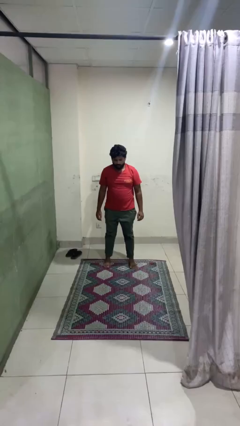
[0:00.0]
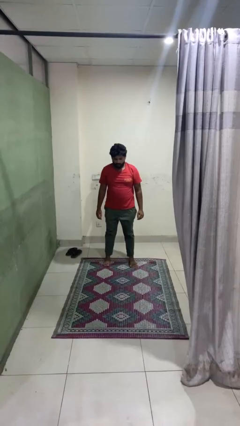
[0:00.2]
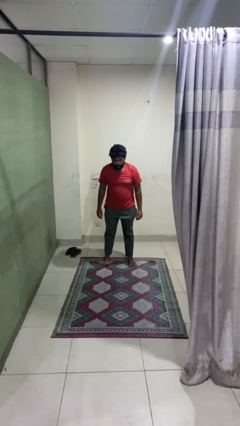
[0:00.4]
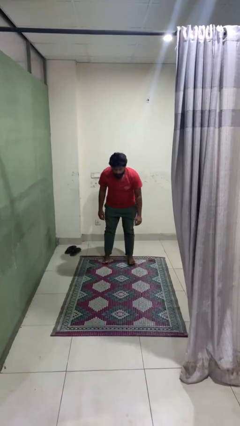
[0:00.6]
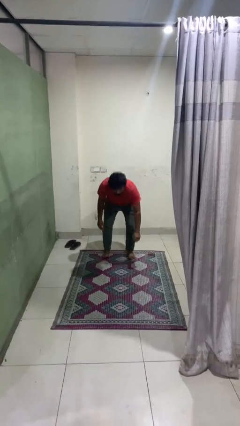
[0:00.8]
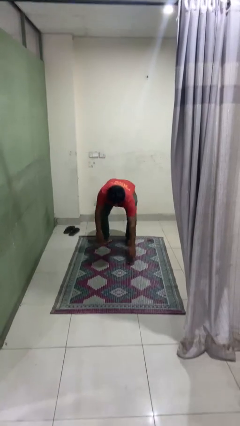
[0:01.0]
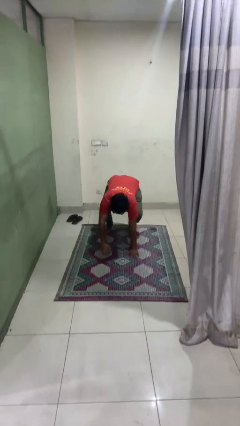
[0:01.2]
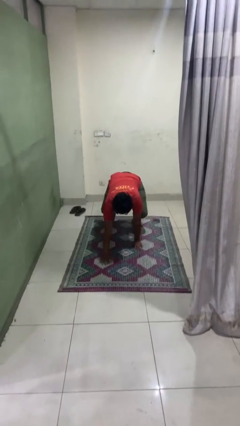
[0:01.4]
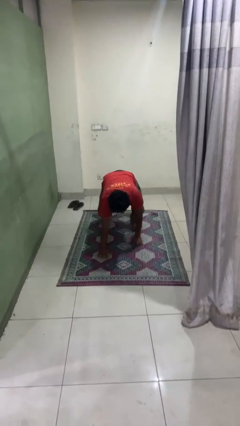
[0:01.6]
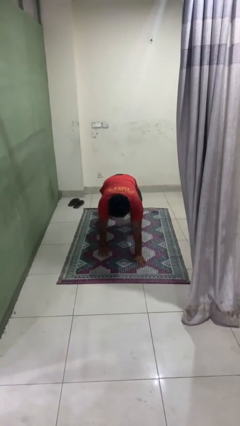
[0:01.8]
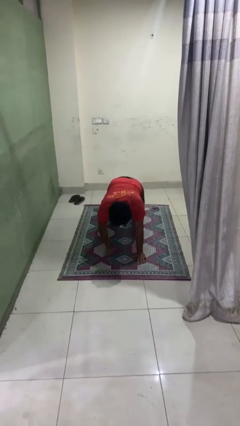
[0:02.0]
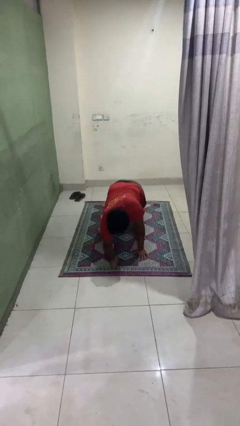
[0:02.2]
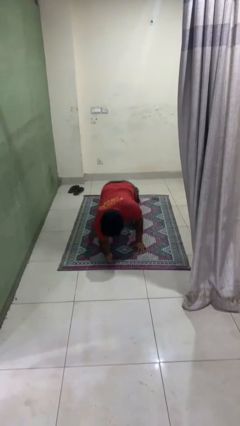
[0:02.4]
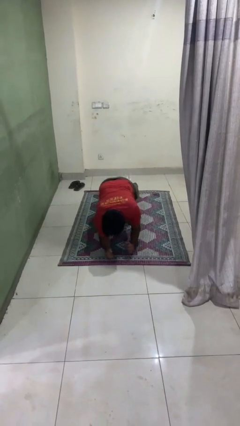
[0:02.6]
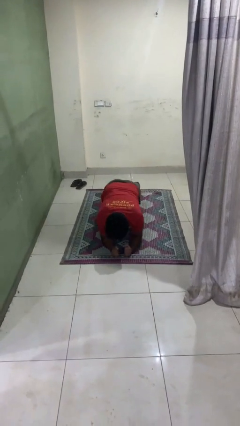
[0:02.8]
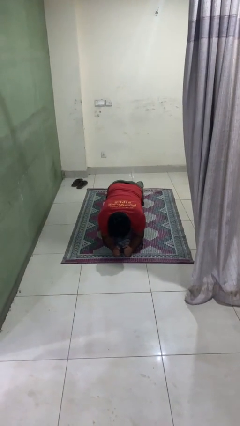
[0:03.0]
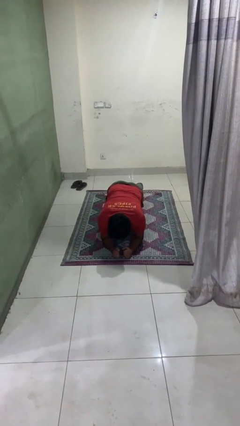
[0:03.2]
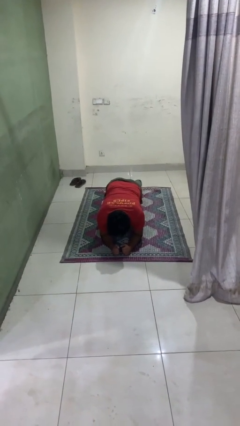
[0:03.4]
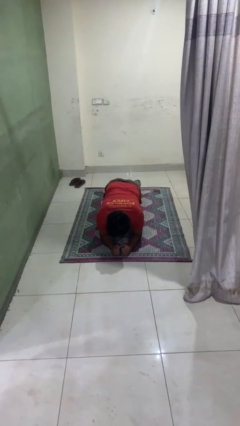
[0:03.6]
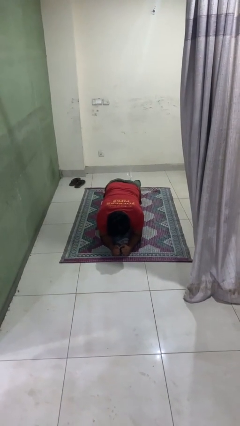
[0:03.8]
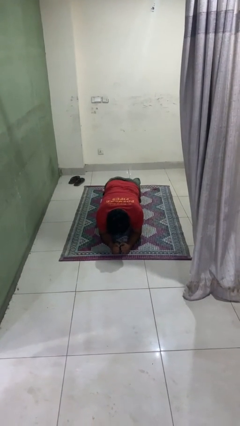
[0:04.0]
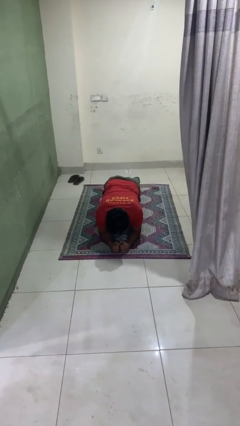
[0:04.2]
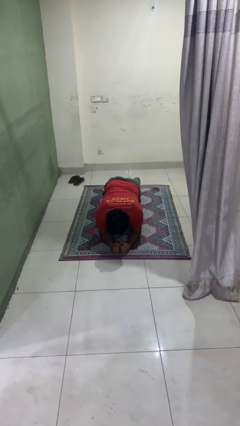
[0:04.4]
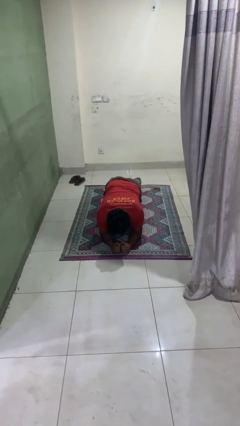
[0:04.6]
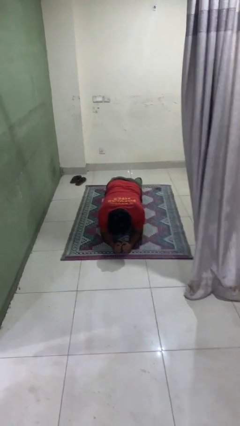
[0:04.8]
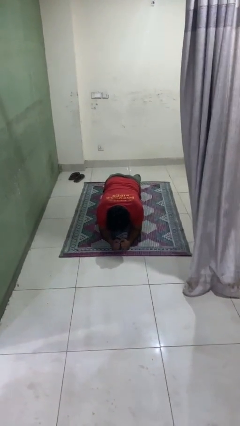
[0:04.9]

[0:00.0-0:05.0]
person exercises with plank

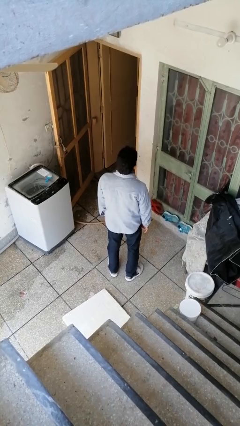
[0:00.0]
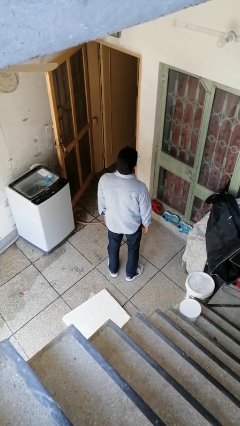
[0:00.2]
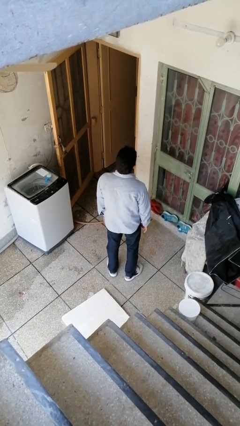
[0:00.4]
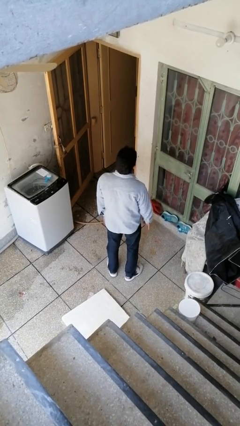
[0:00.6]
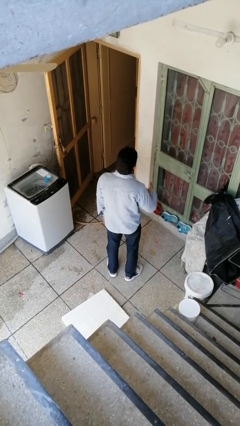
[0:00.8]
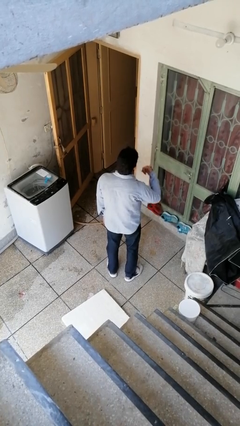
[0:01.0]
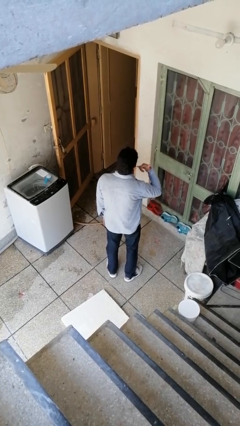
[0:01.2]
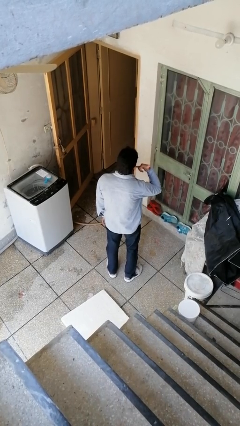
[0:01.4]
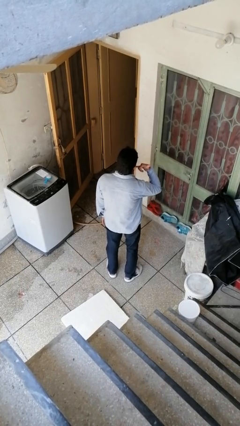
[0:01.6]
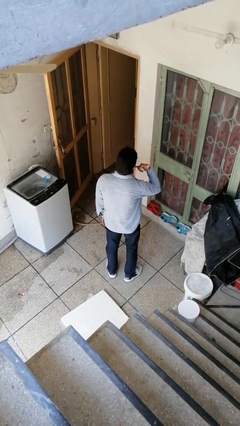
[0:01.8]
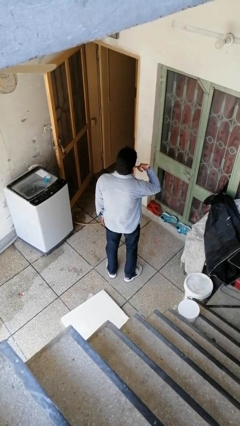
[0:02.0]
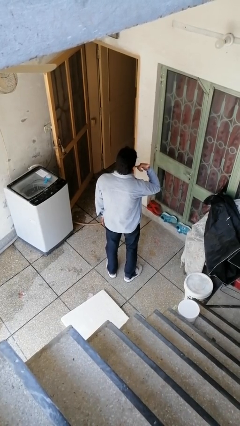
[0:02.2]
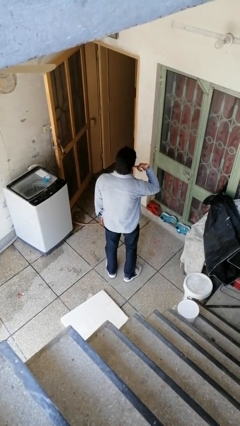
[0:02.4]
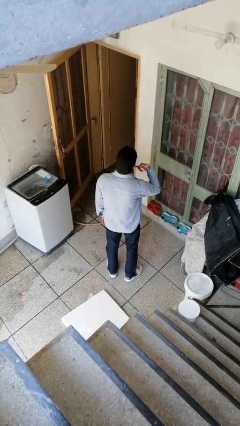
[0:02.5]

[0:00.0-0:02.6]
person gestures call me

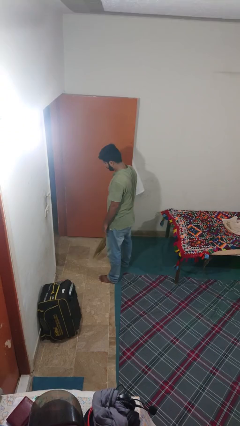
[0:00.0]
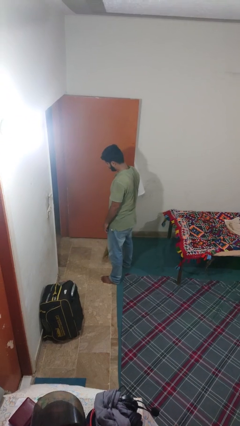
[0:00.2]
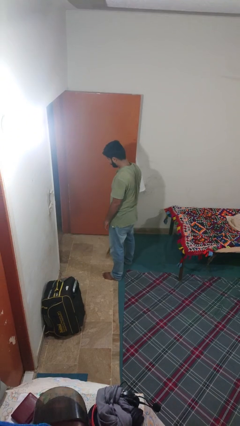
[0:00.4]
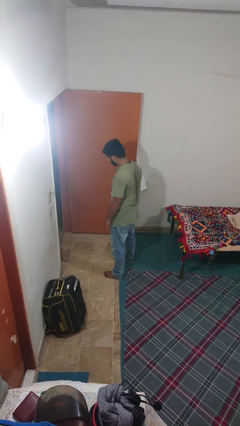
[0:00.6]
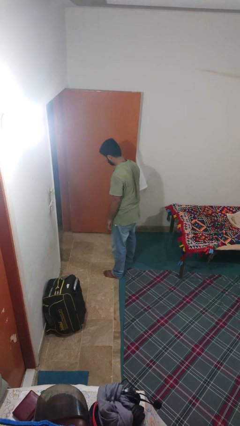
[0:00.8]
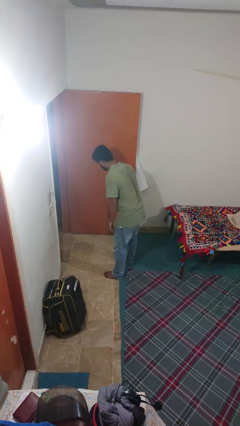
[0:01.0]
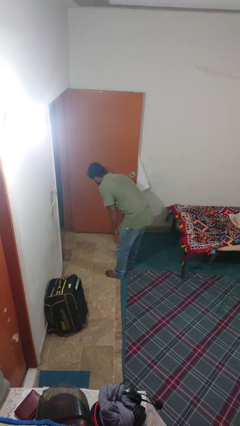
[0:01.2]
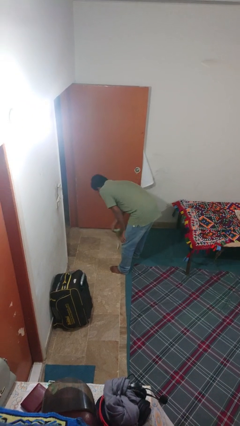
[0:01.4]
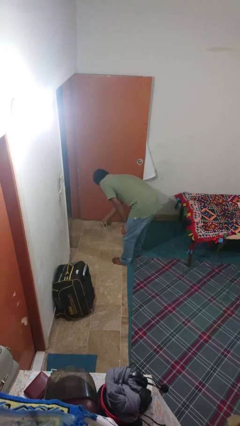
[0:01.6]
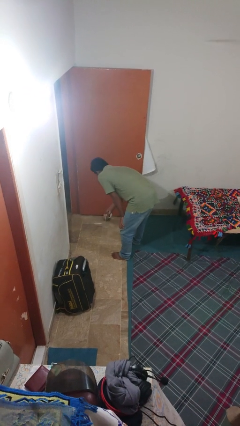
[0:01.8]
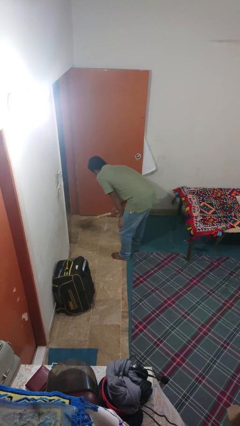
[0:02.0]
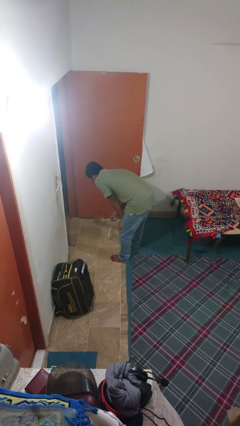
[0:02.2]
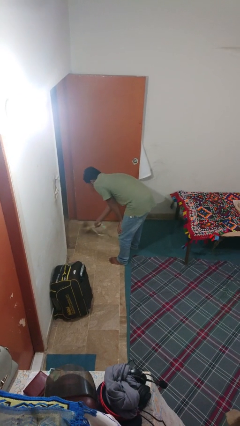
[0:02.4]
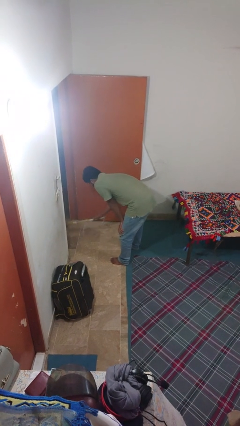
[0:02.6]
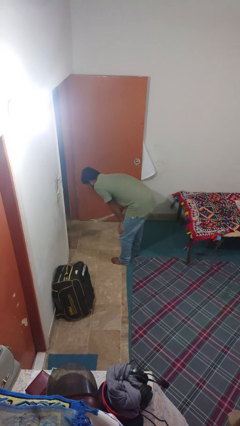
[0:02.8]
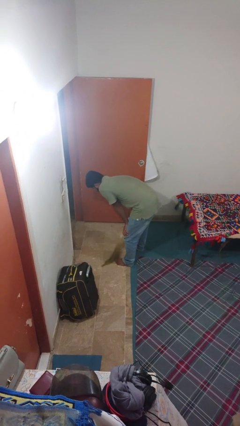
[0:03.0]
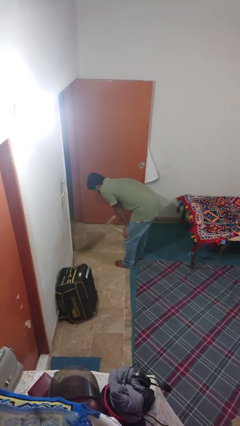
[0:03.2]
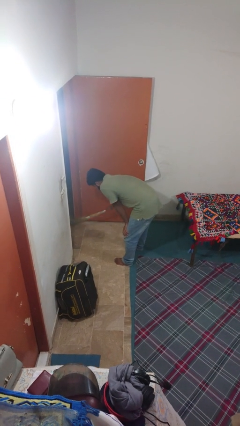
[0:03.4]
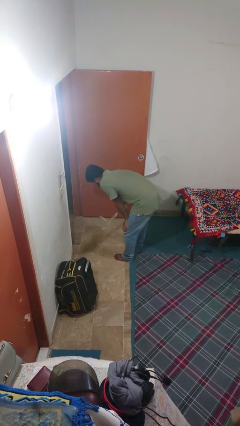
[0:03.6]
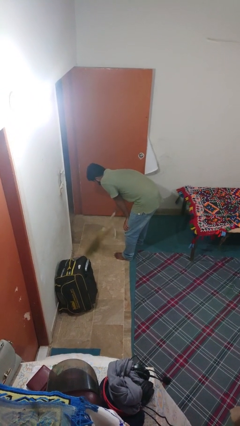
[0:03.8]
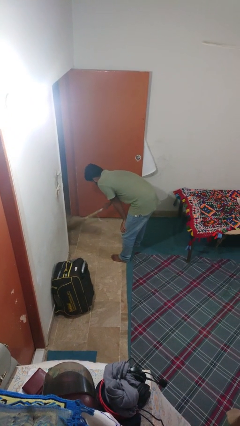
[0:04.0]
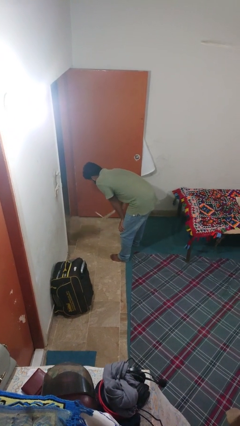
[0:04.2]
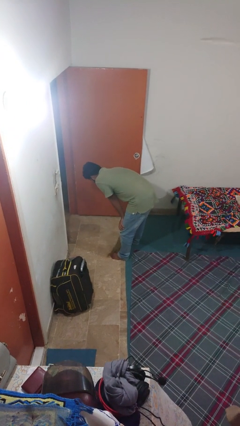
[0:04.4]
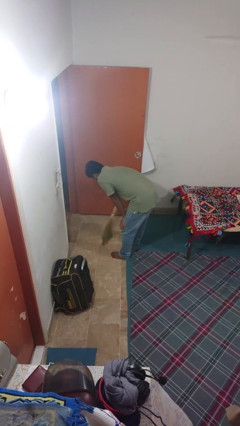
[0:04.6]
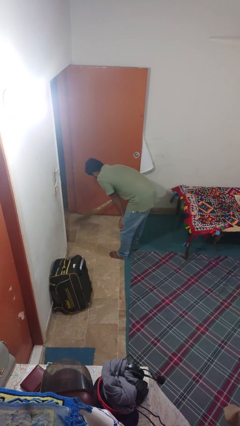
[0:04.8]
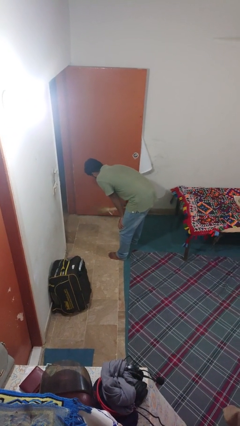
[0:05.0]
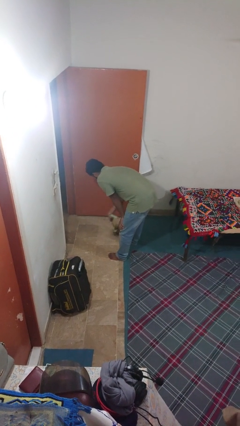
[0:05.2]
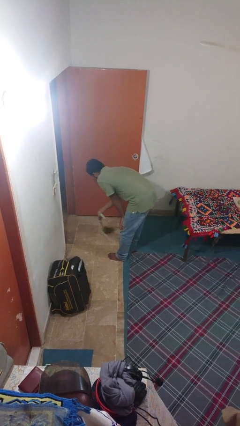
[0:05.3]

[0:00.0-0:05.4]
person sweeps floor

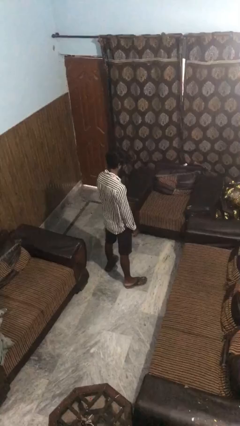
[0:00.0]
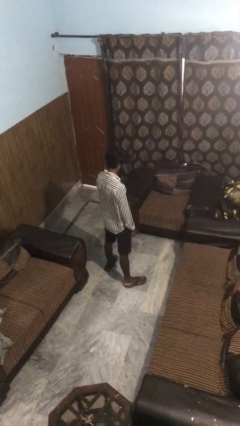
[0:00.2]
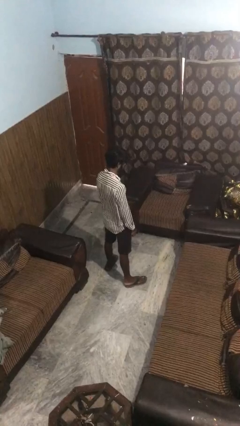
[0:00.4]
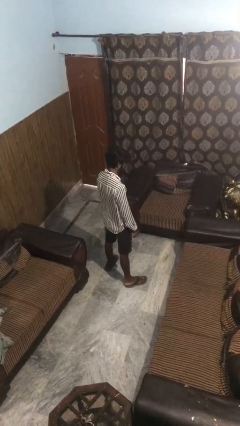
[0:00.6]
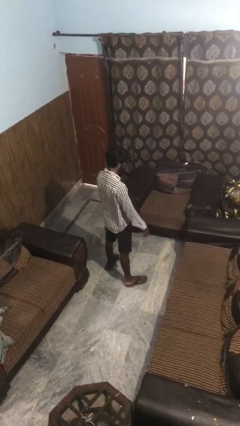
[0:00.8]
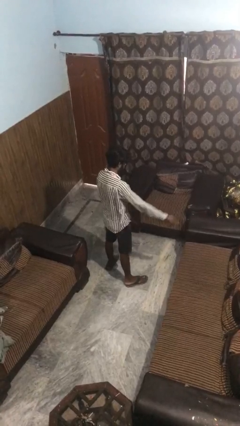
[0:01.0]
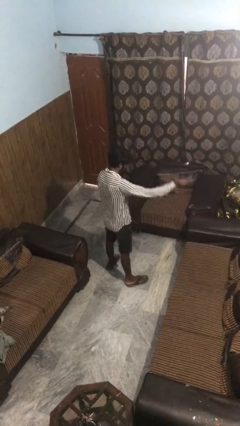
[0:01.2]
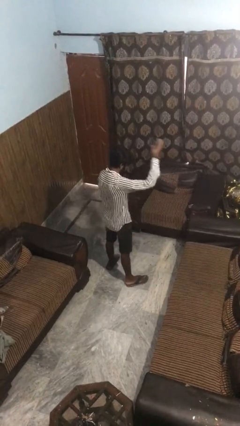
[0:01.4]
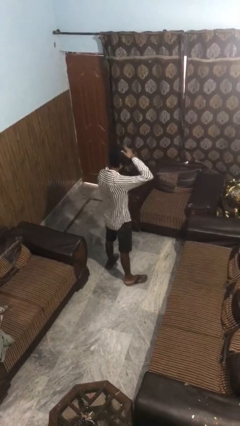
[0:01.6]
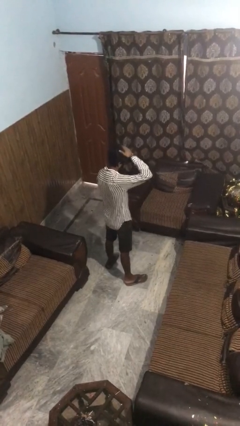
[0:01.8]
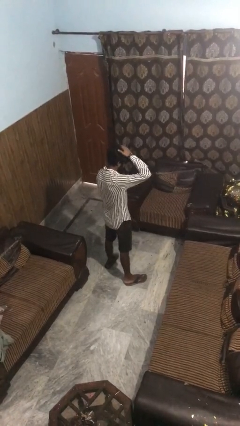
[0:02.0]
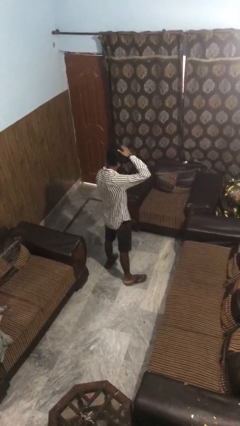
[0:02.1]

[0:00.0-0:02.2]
person pats head

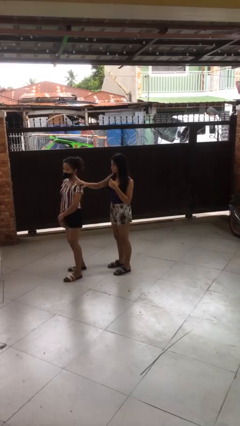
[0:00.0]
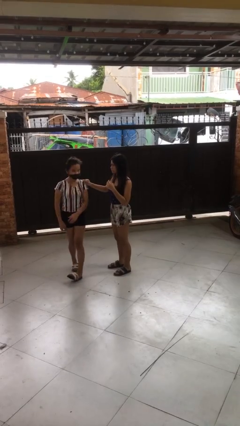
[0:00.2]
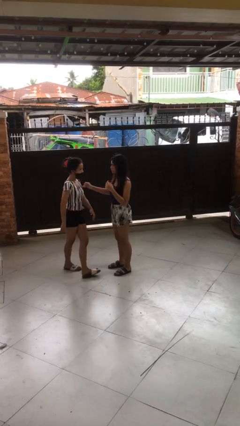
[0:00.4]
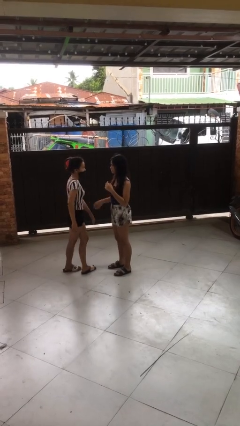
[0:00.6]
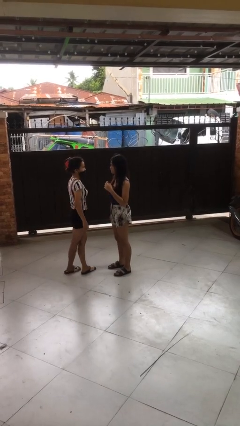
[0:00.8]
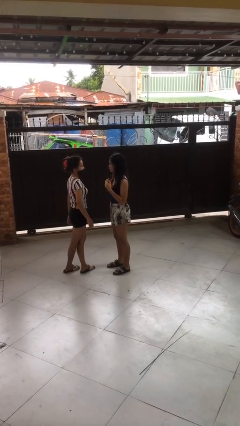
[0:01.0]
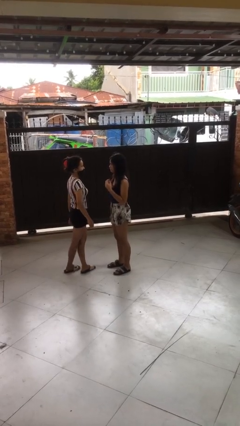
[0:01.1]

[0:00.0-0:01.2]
person spins person around

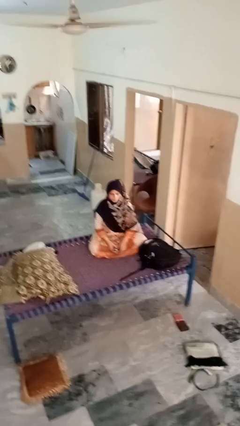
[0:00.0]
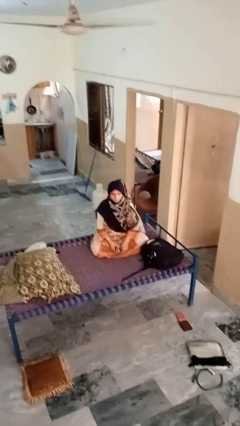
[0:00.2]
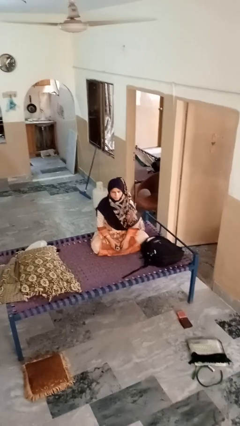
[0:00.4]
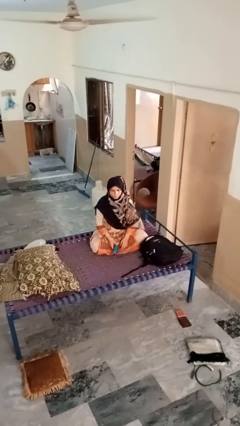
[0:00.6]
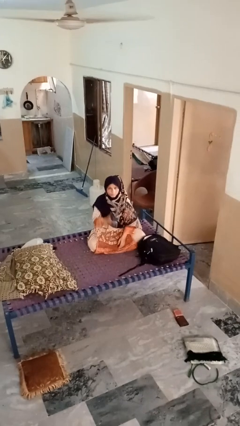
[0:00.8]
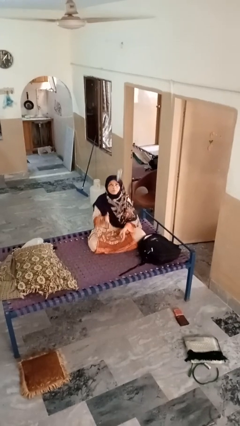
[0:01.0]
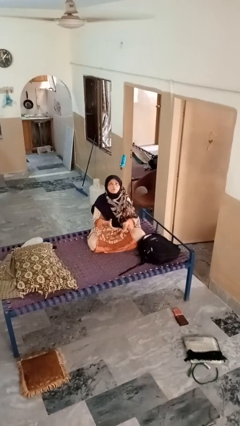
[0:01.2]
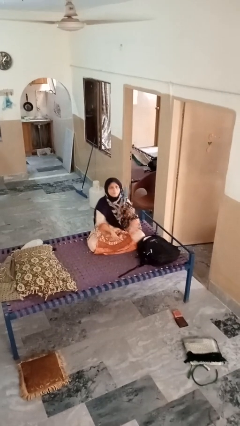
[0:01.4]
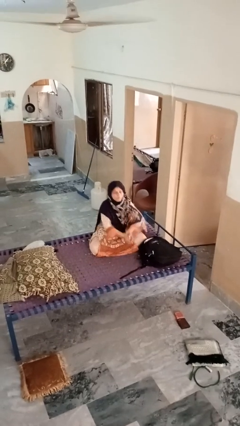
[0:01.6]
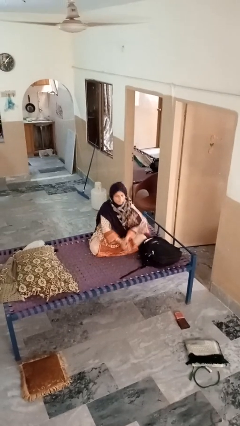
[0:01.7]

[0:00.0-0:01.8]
person drops object
